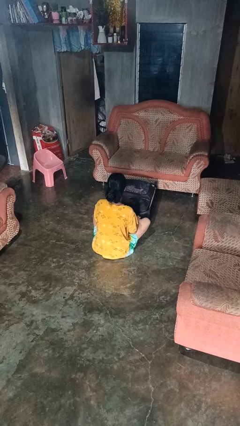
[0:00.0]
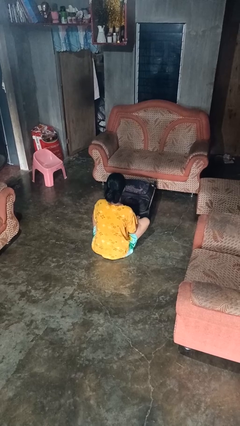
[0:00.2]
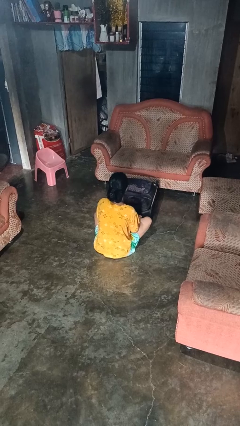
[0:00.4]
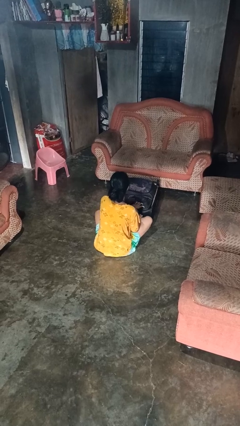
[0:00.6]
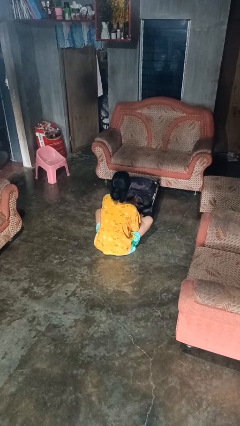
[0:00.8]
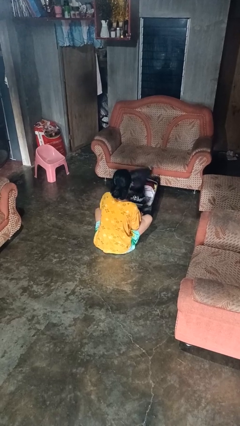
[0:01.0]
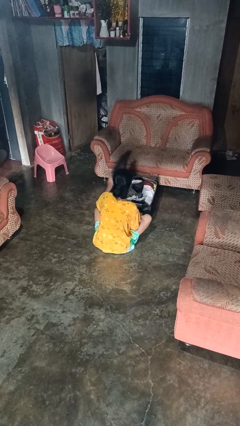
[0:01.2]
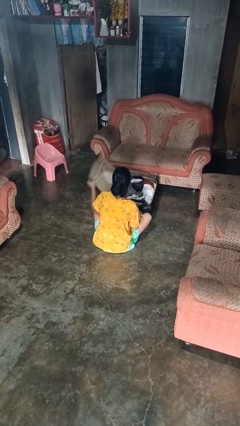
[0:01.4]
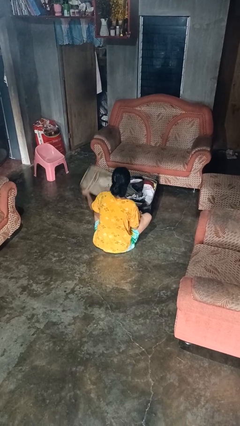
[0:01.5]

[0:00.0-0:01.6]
person opens suitcase

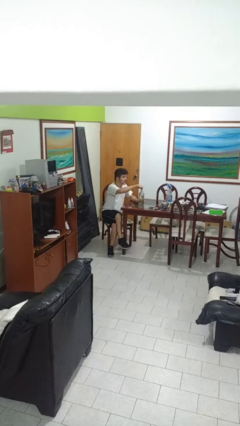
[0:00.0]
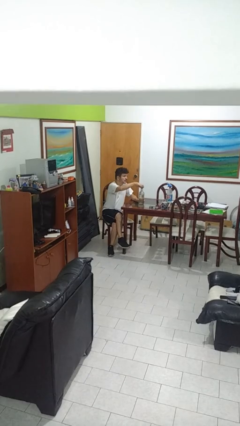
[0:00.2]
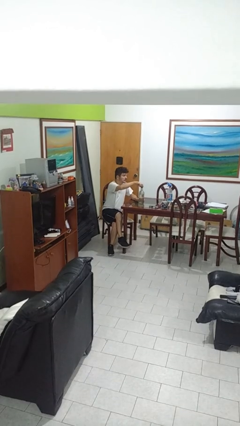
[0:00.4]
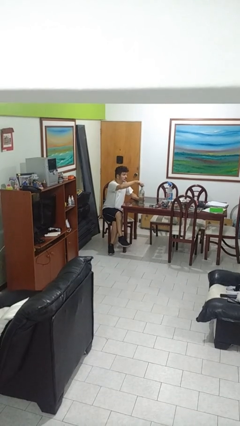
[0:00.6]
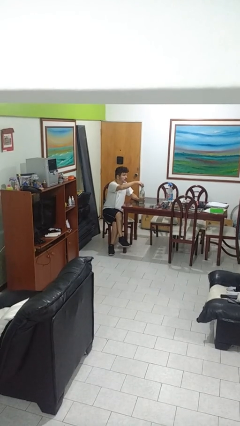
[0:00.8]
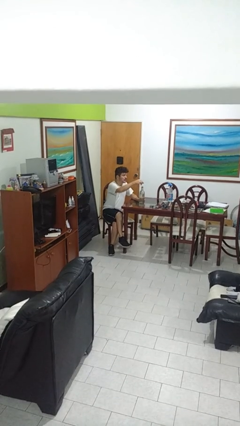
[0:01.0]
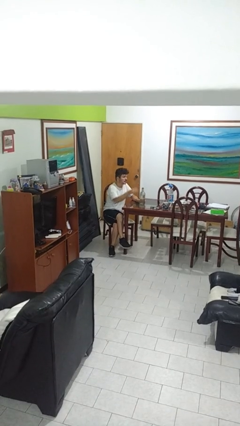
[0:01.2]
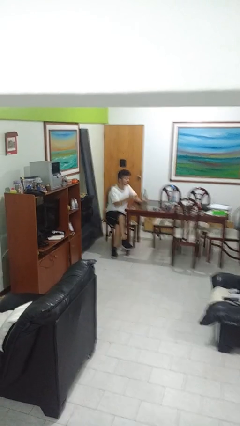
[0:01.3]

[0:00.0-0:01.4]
person unscrews lid from bottle

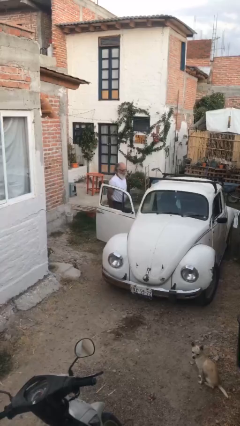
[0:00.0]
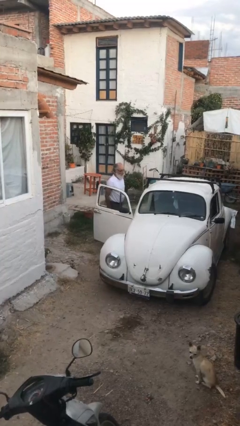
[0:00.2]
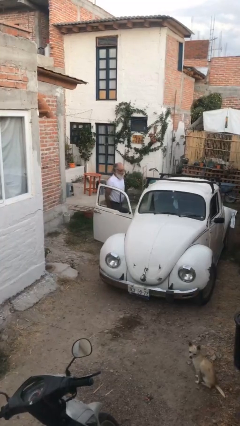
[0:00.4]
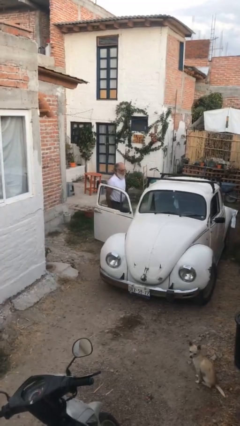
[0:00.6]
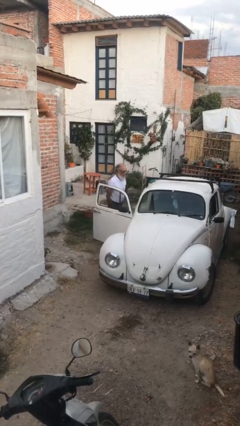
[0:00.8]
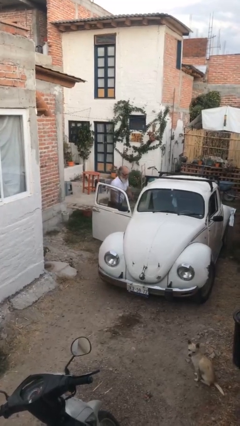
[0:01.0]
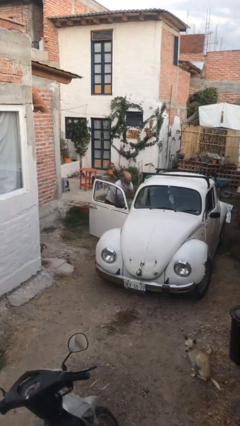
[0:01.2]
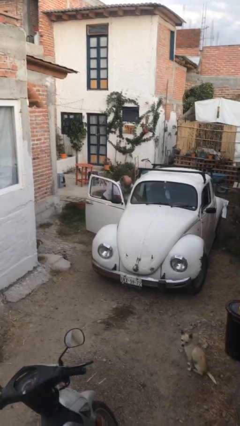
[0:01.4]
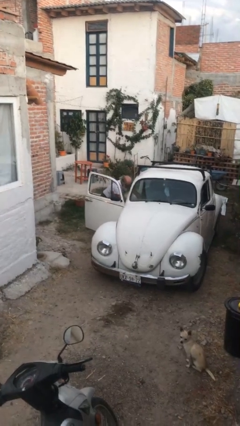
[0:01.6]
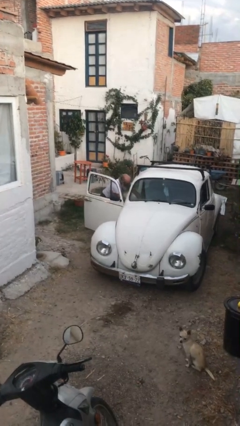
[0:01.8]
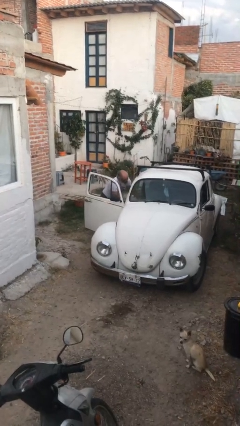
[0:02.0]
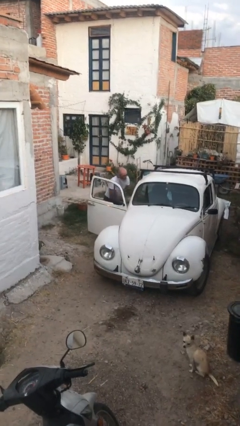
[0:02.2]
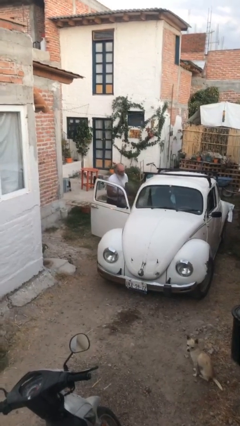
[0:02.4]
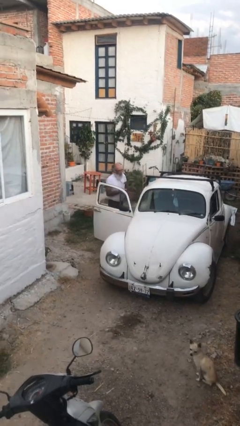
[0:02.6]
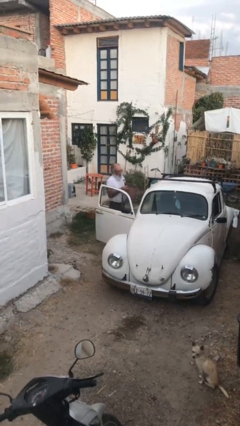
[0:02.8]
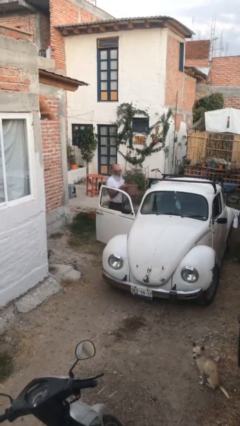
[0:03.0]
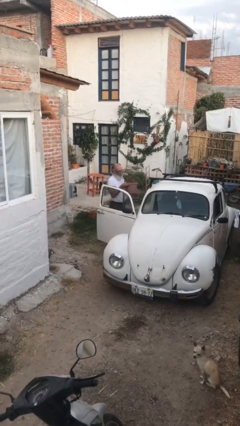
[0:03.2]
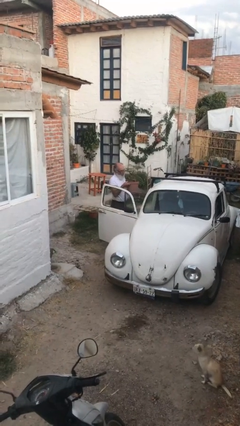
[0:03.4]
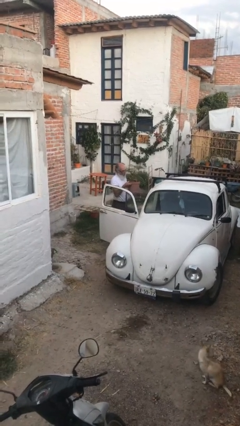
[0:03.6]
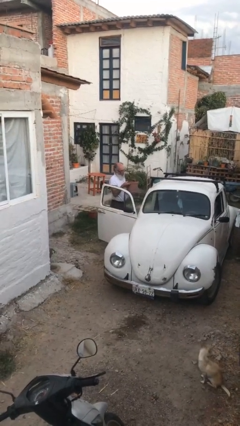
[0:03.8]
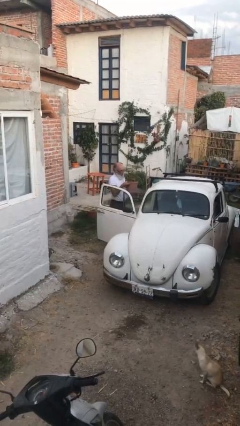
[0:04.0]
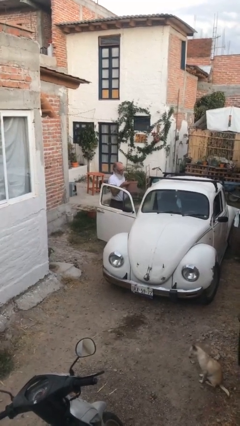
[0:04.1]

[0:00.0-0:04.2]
person unloads car

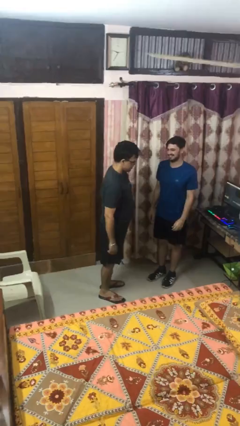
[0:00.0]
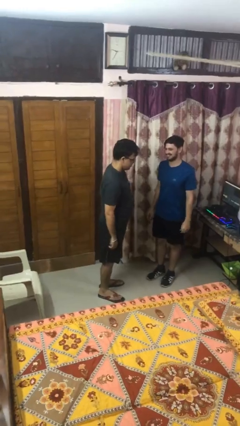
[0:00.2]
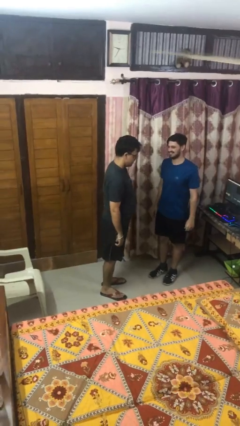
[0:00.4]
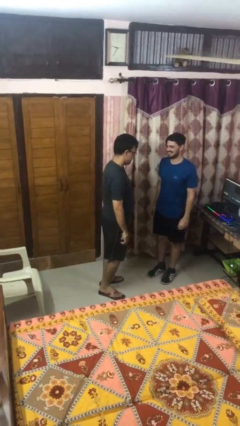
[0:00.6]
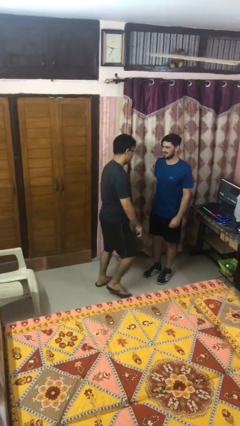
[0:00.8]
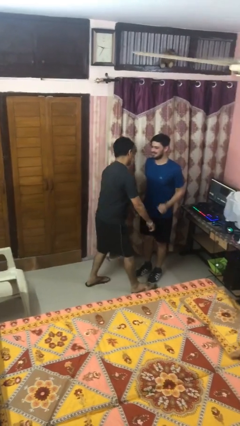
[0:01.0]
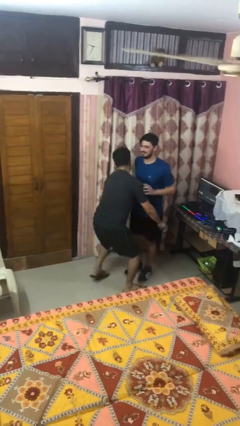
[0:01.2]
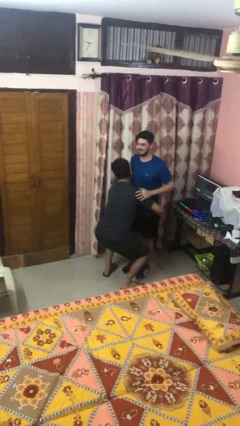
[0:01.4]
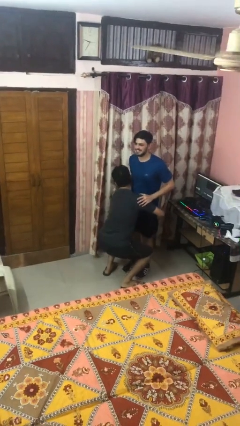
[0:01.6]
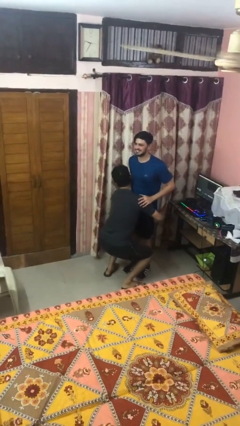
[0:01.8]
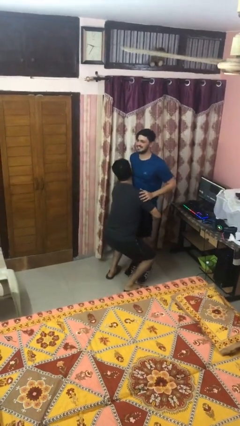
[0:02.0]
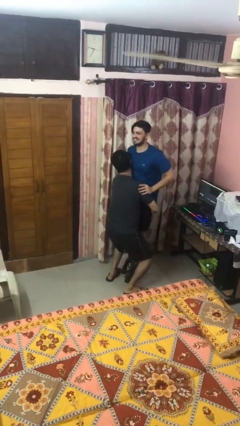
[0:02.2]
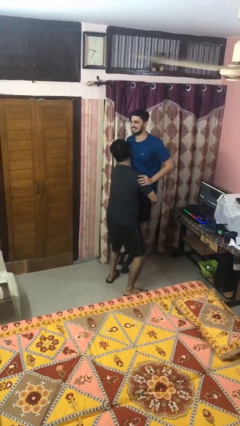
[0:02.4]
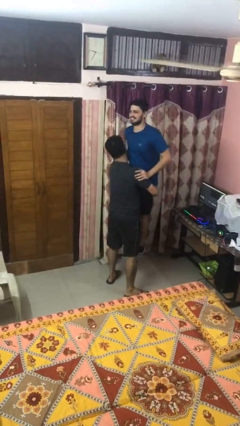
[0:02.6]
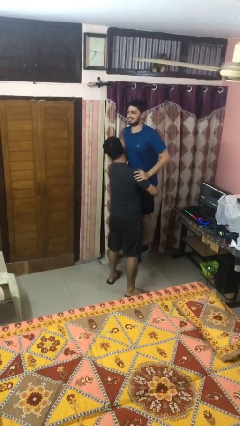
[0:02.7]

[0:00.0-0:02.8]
person picks up person

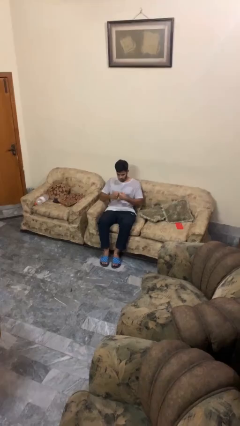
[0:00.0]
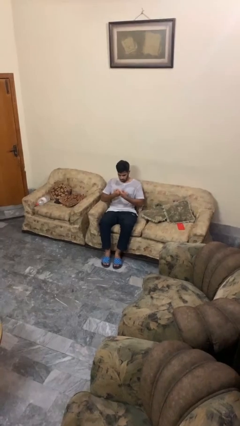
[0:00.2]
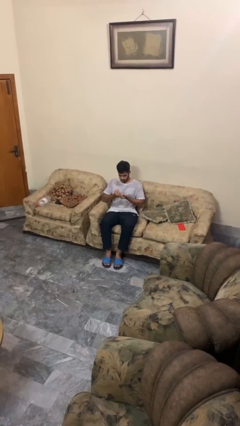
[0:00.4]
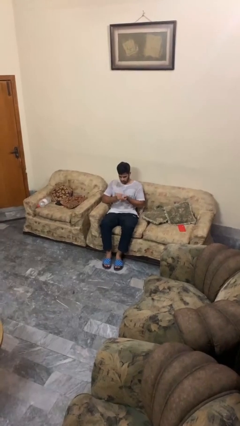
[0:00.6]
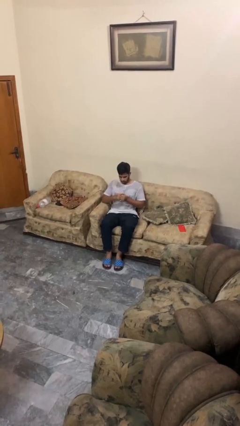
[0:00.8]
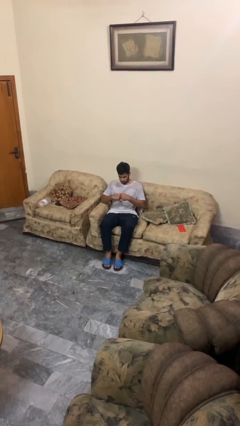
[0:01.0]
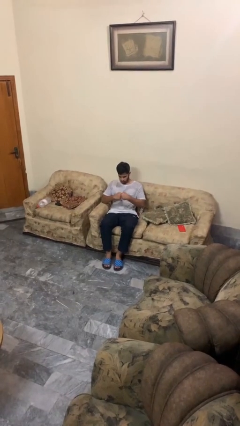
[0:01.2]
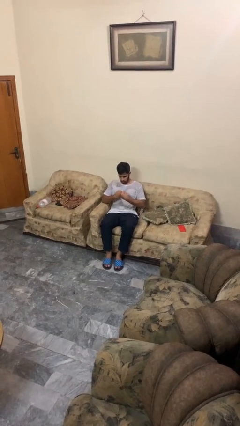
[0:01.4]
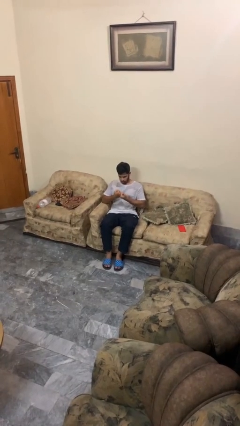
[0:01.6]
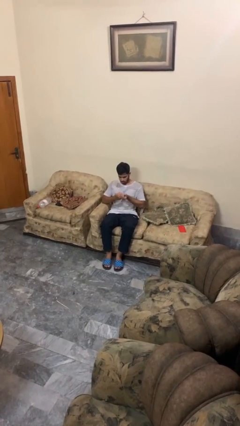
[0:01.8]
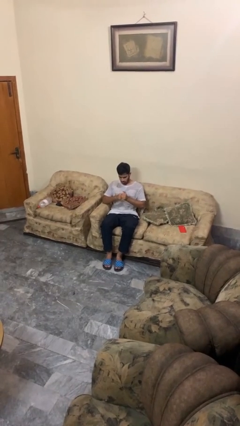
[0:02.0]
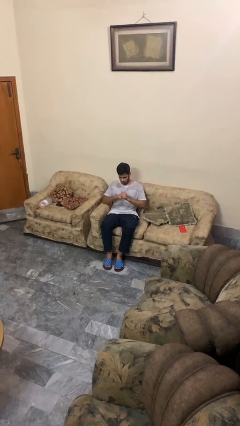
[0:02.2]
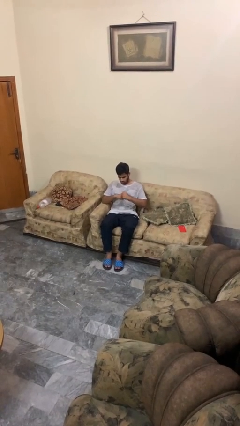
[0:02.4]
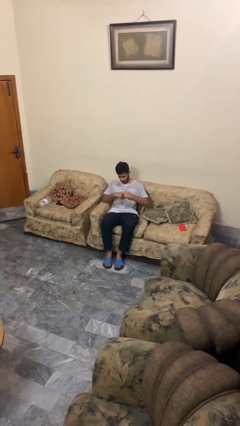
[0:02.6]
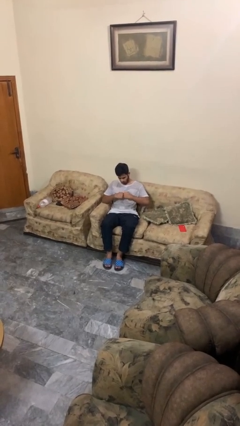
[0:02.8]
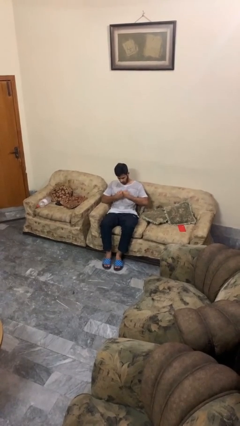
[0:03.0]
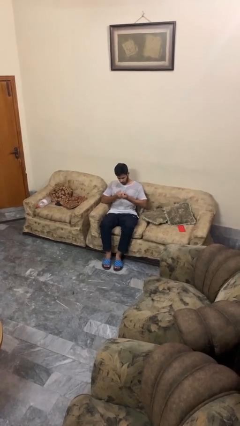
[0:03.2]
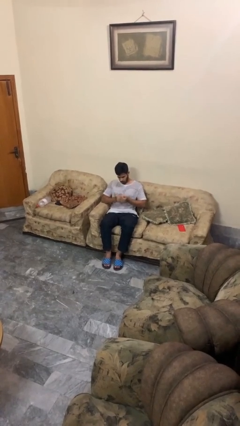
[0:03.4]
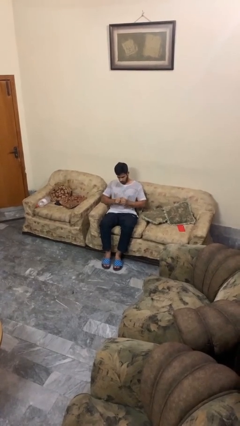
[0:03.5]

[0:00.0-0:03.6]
person cracks knuckles

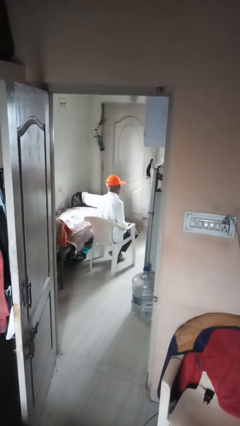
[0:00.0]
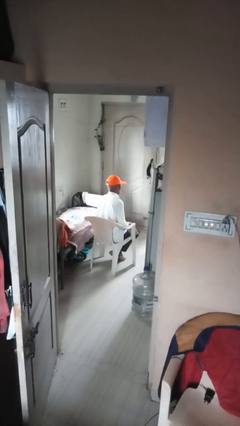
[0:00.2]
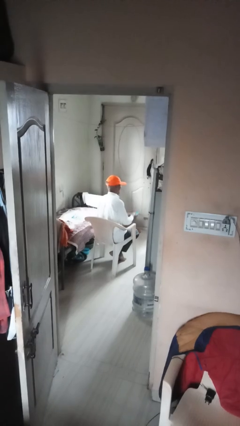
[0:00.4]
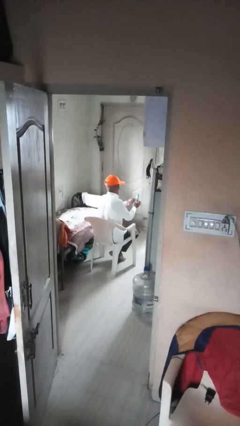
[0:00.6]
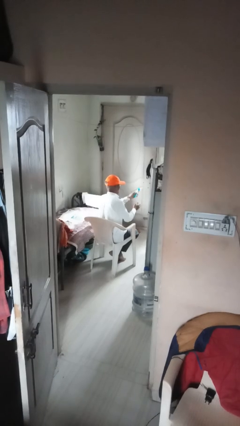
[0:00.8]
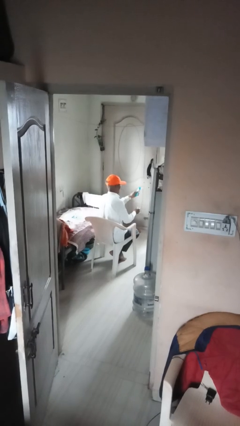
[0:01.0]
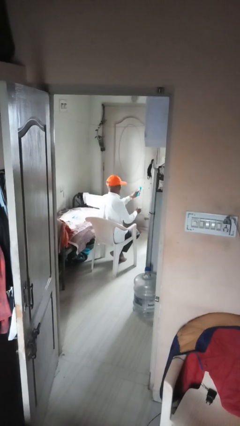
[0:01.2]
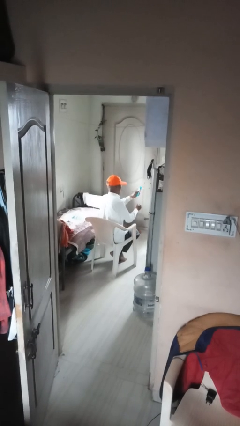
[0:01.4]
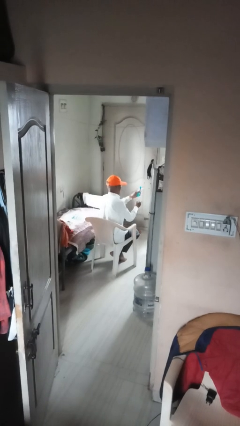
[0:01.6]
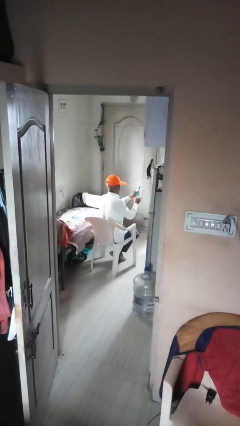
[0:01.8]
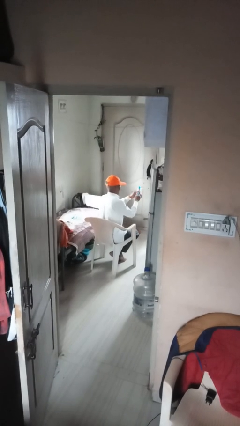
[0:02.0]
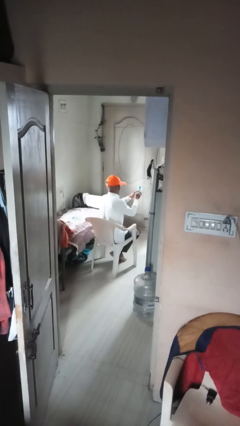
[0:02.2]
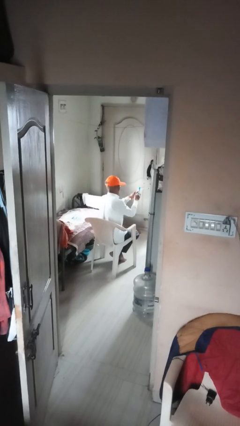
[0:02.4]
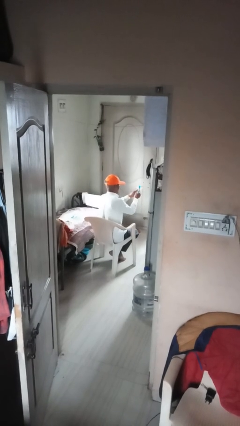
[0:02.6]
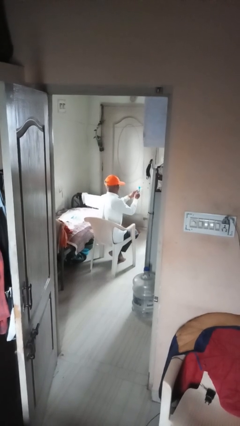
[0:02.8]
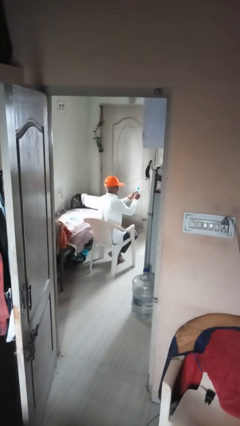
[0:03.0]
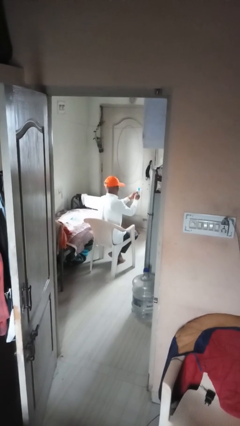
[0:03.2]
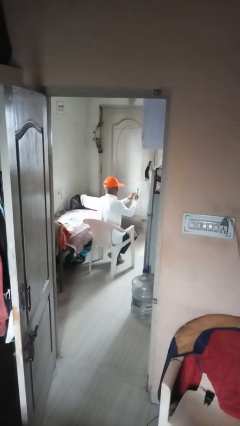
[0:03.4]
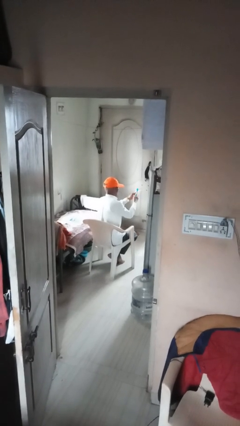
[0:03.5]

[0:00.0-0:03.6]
person squeezes object
